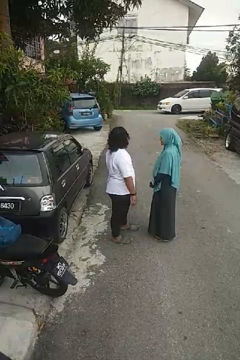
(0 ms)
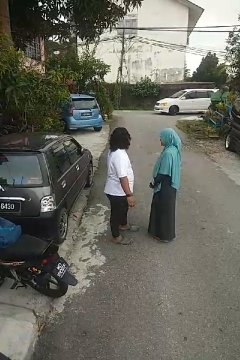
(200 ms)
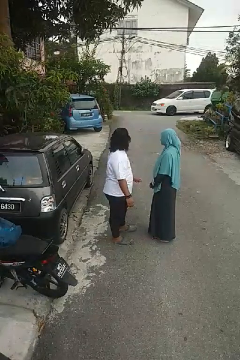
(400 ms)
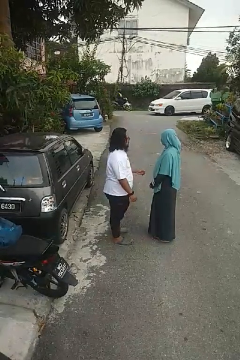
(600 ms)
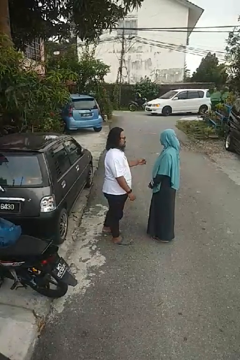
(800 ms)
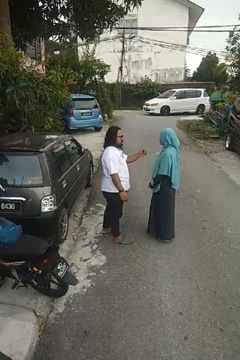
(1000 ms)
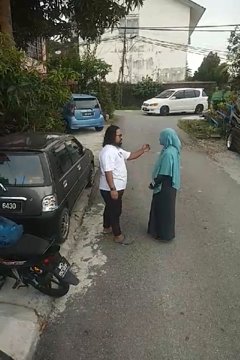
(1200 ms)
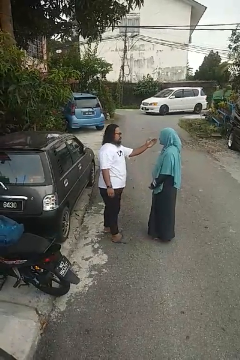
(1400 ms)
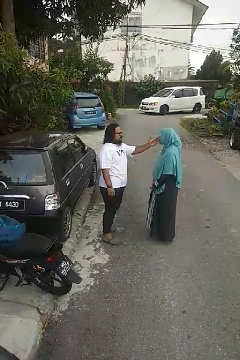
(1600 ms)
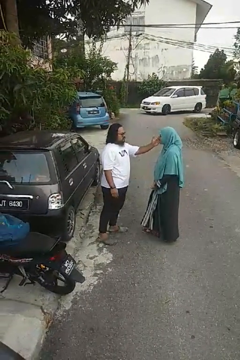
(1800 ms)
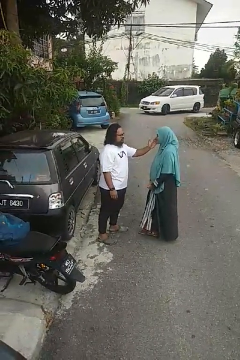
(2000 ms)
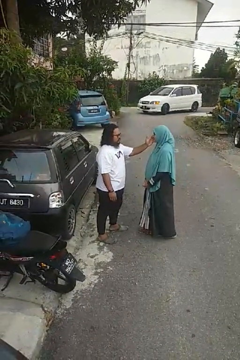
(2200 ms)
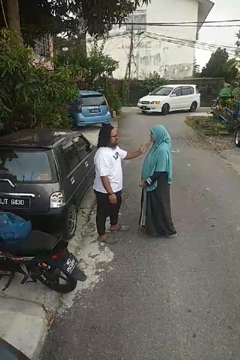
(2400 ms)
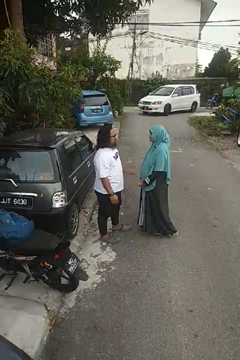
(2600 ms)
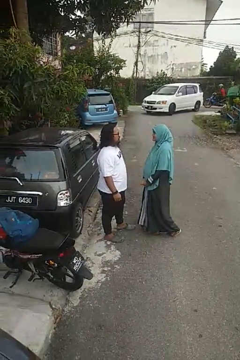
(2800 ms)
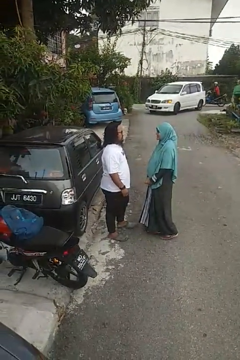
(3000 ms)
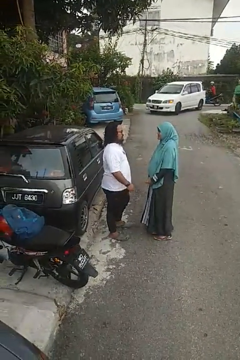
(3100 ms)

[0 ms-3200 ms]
person touches face of person

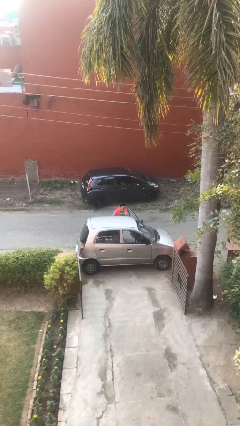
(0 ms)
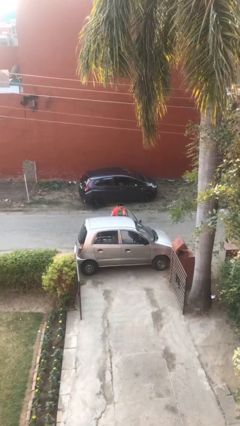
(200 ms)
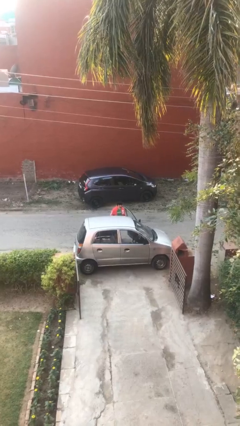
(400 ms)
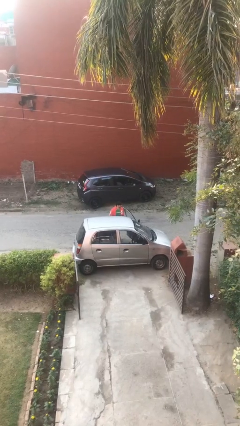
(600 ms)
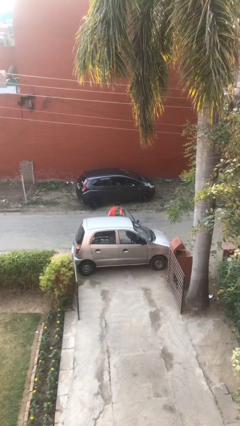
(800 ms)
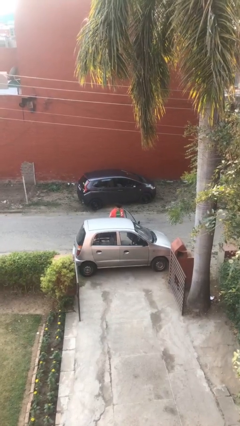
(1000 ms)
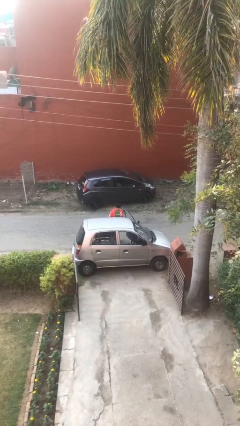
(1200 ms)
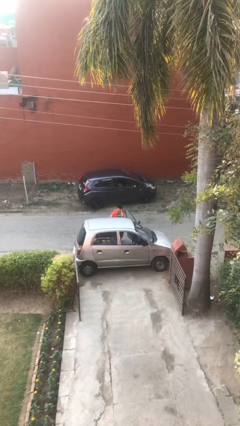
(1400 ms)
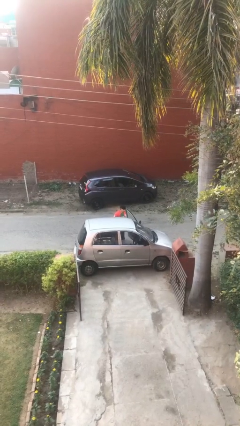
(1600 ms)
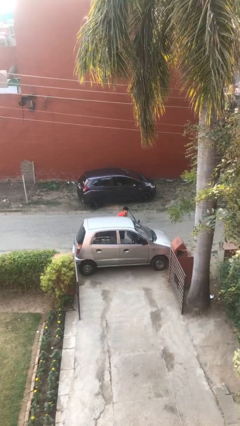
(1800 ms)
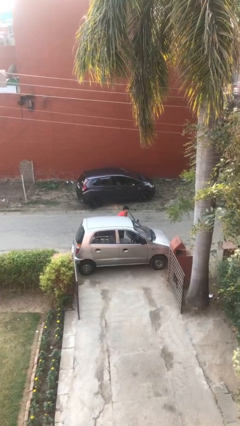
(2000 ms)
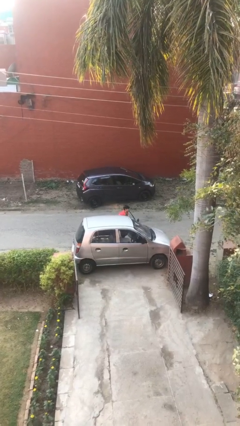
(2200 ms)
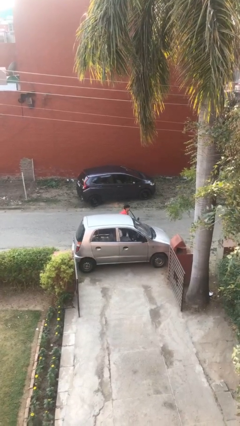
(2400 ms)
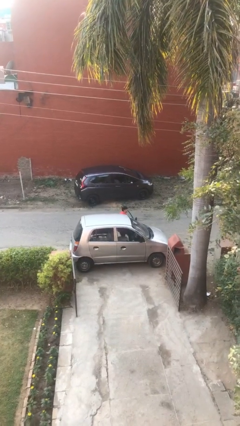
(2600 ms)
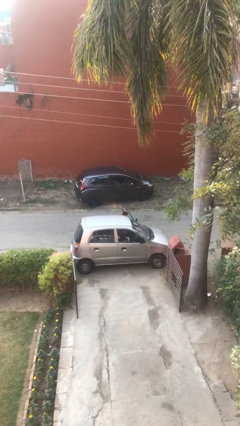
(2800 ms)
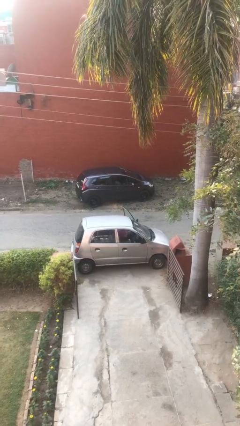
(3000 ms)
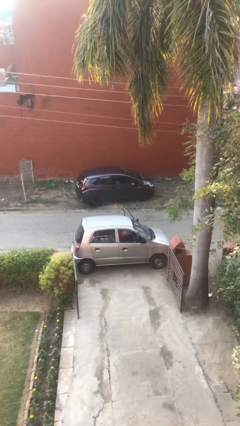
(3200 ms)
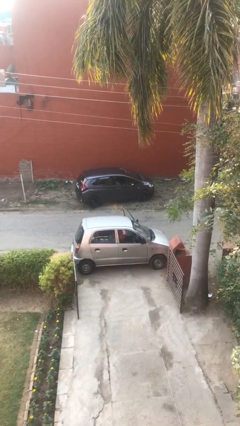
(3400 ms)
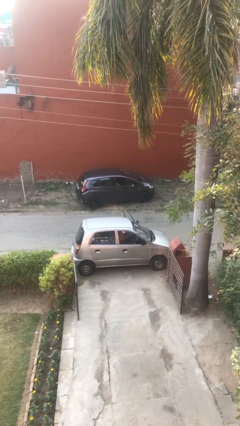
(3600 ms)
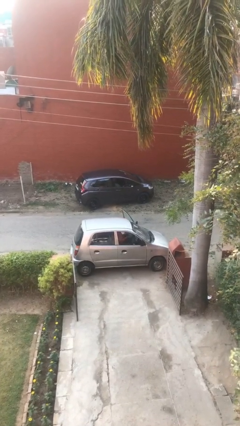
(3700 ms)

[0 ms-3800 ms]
person enters car

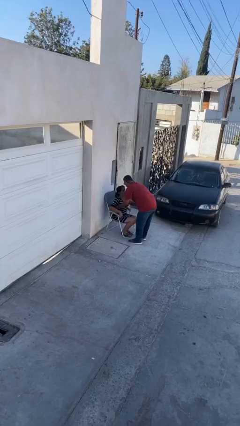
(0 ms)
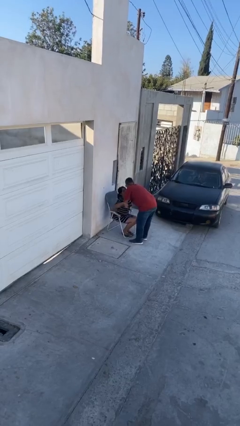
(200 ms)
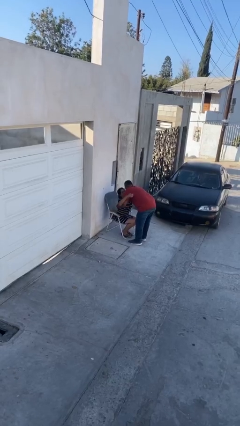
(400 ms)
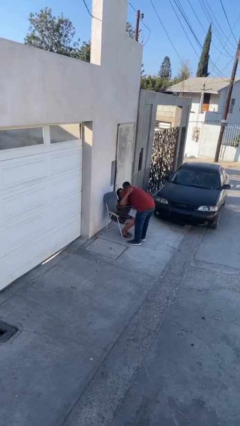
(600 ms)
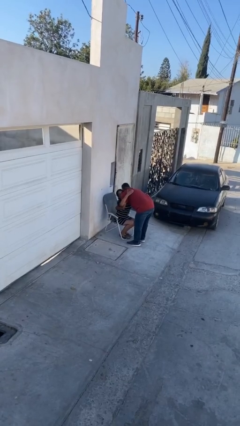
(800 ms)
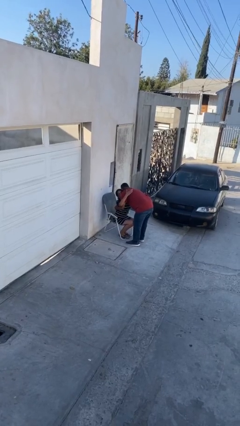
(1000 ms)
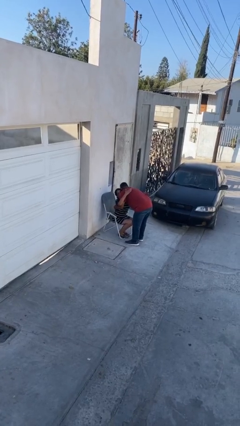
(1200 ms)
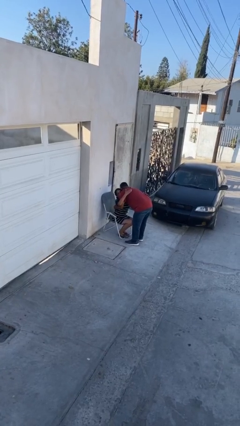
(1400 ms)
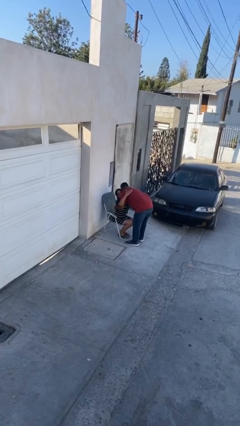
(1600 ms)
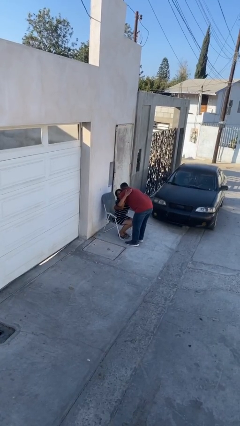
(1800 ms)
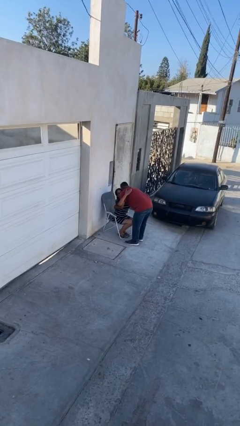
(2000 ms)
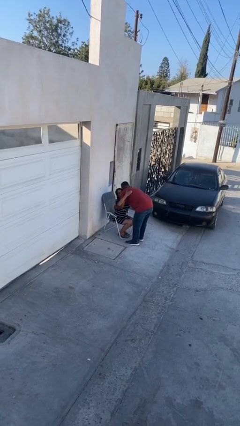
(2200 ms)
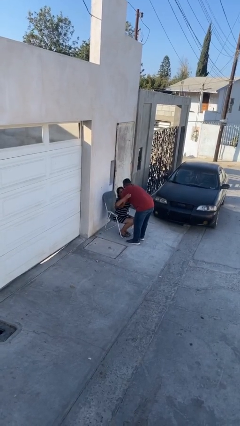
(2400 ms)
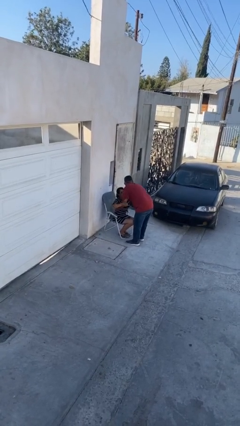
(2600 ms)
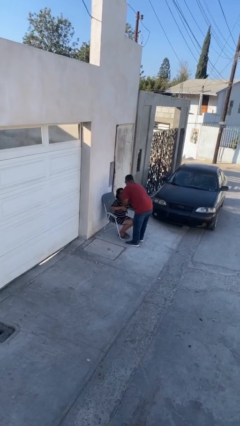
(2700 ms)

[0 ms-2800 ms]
person embraces person

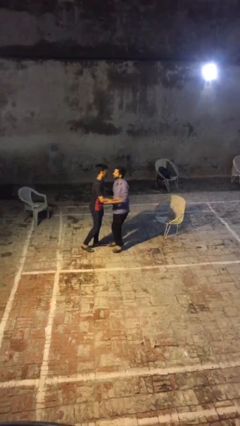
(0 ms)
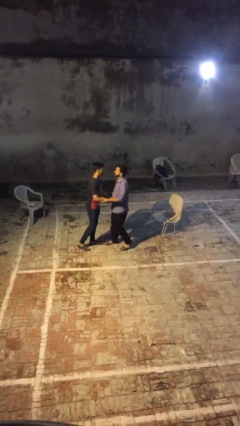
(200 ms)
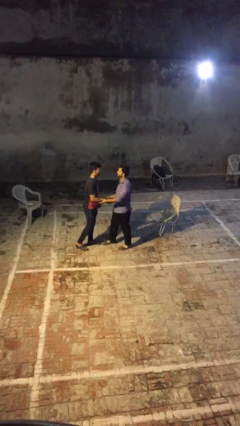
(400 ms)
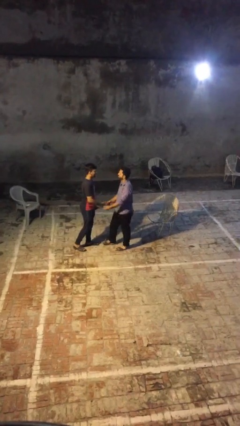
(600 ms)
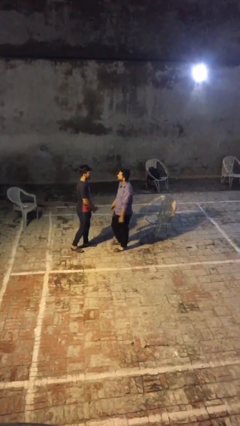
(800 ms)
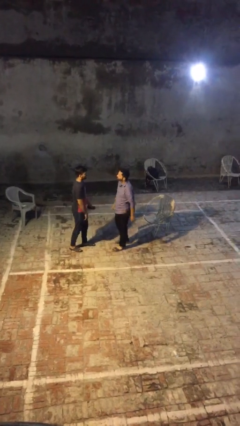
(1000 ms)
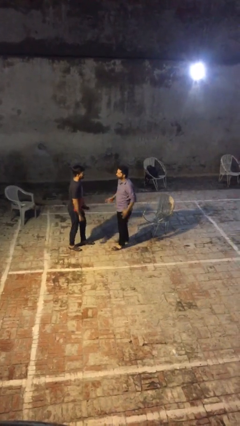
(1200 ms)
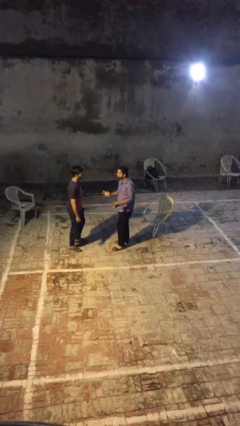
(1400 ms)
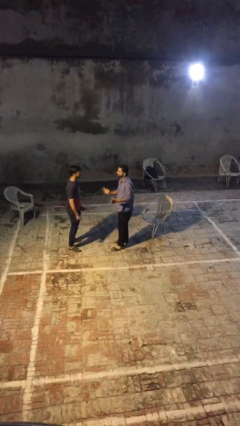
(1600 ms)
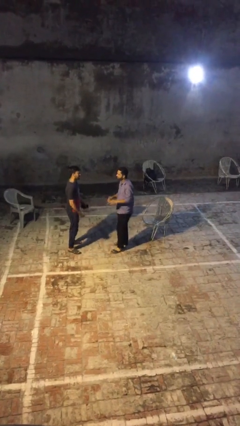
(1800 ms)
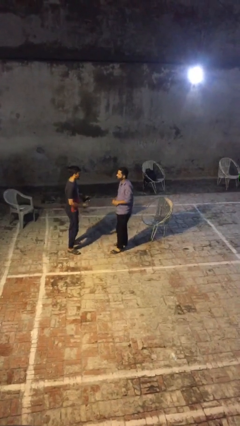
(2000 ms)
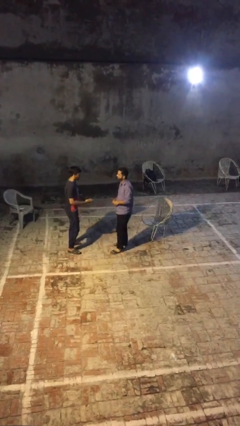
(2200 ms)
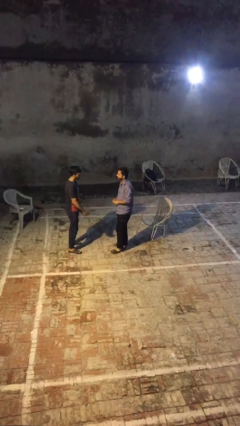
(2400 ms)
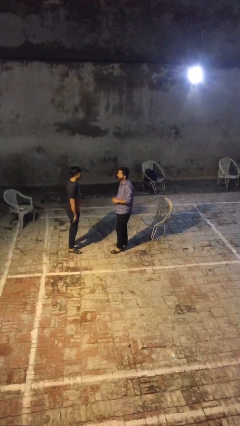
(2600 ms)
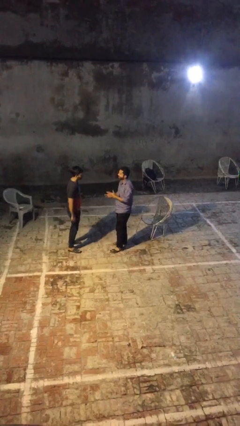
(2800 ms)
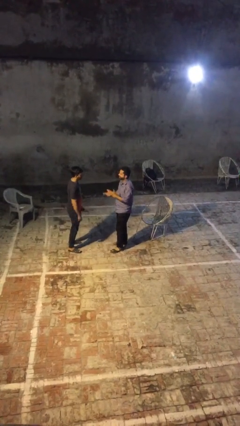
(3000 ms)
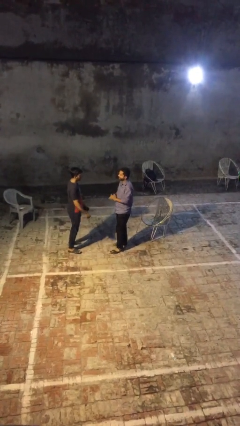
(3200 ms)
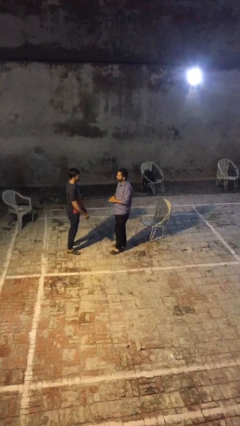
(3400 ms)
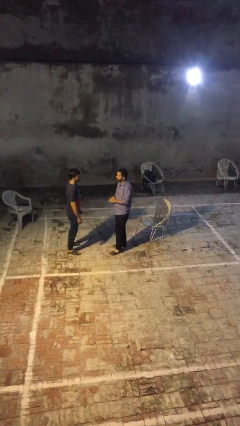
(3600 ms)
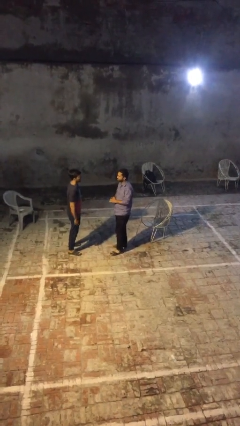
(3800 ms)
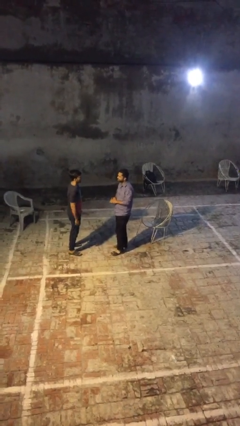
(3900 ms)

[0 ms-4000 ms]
person talks to person

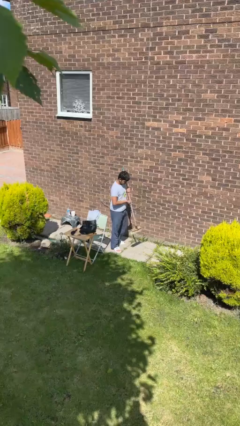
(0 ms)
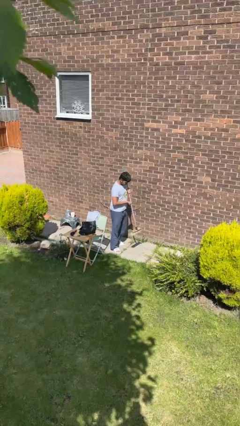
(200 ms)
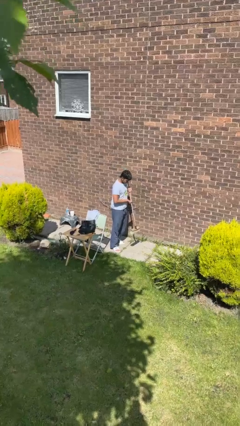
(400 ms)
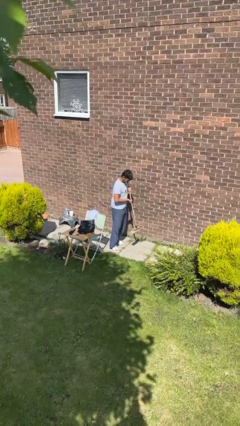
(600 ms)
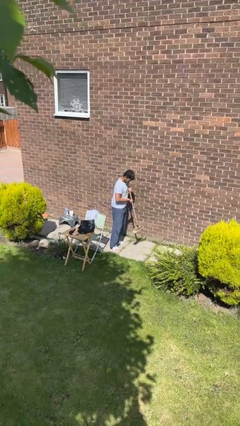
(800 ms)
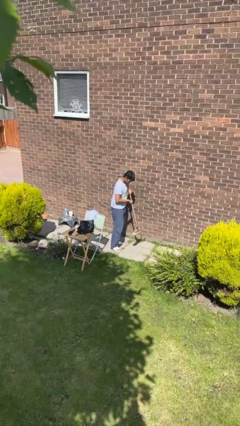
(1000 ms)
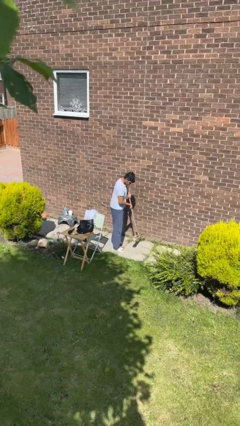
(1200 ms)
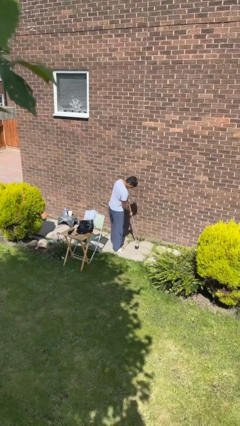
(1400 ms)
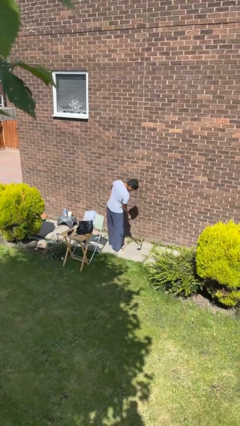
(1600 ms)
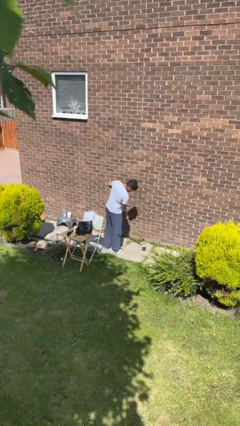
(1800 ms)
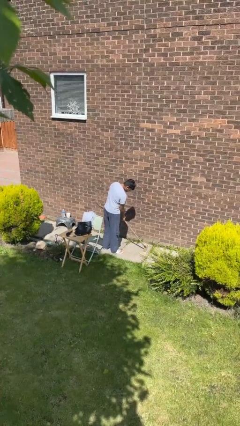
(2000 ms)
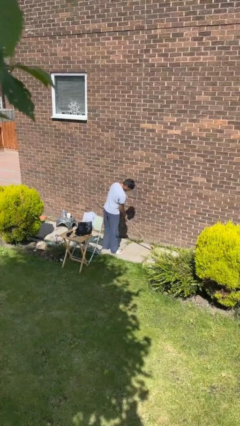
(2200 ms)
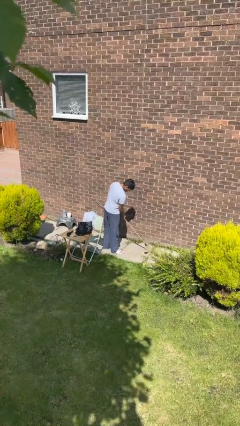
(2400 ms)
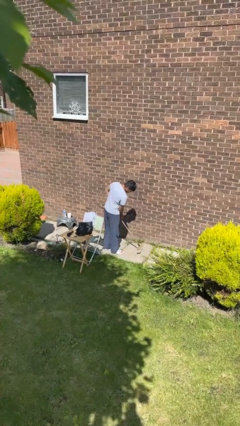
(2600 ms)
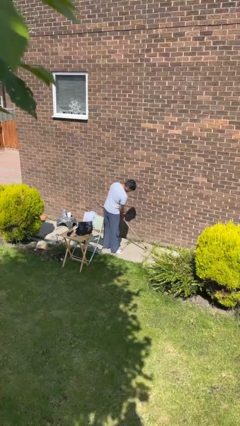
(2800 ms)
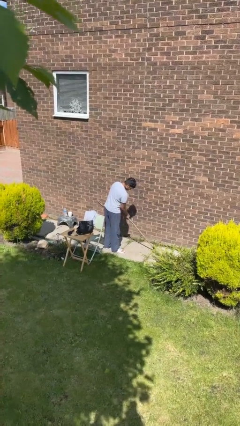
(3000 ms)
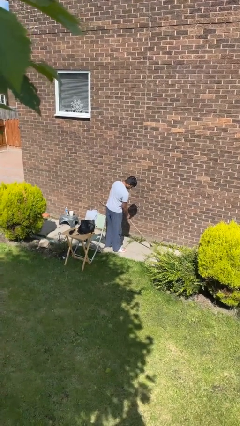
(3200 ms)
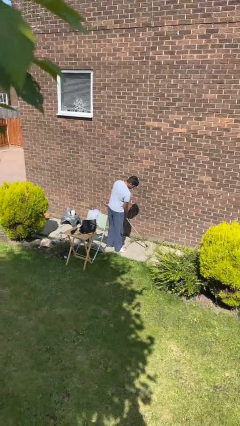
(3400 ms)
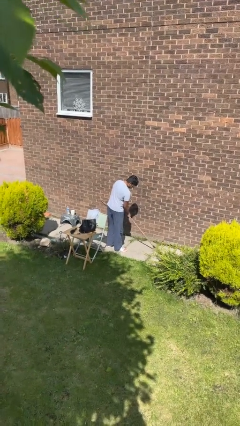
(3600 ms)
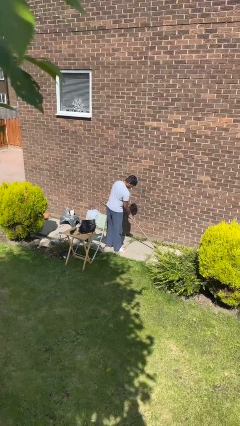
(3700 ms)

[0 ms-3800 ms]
person sweeps floor

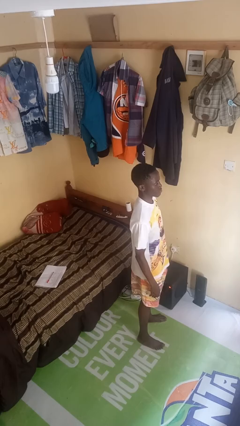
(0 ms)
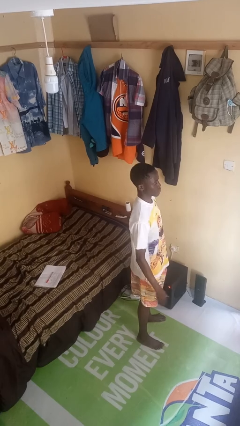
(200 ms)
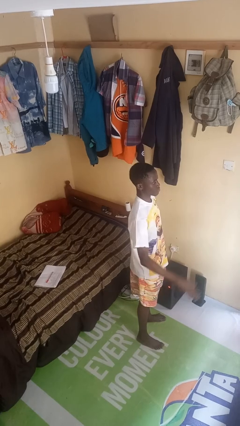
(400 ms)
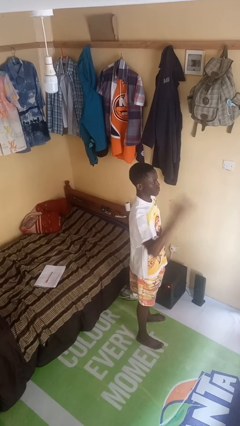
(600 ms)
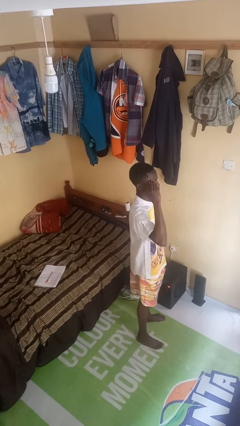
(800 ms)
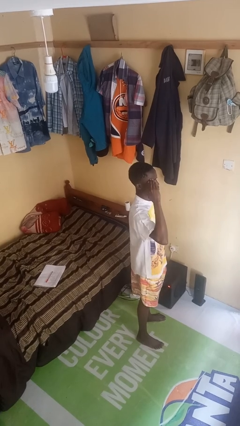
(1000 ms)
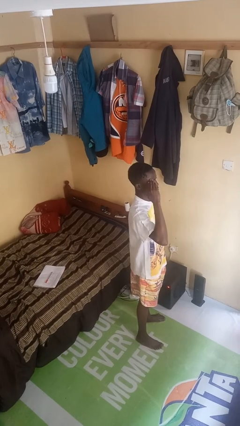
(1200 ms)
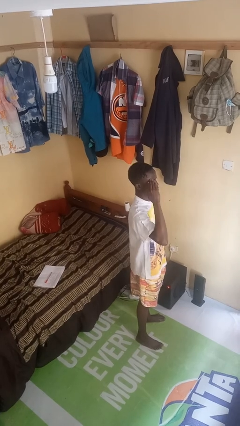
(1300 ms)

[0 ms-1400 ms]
person salutes
